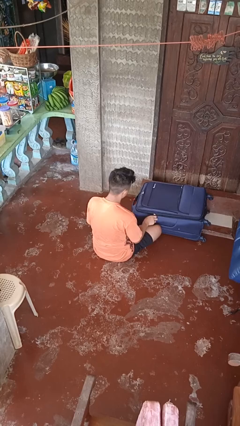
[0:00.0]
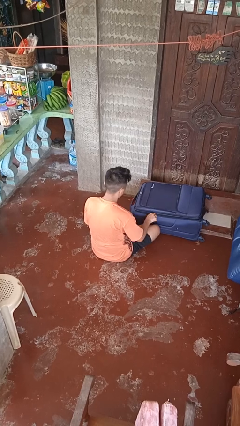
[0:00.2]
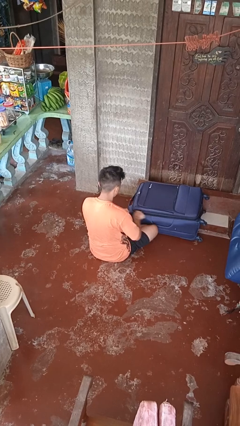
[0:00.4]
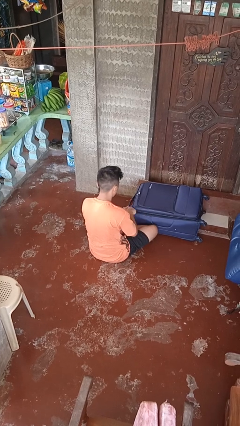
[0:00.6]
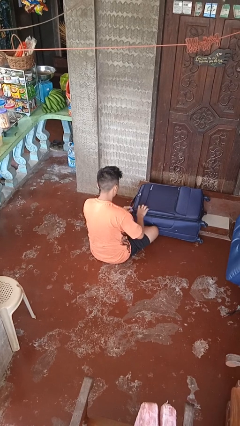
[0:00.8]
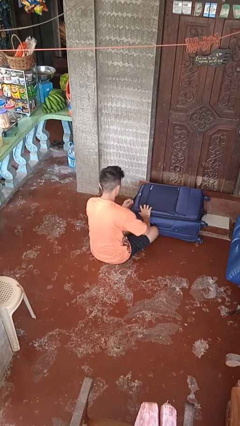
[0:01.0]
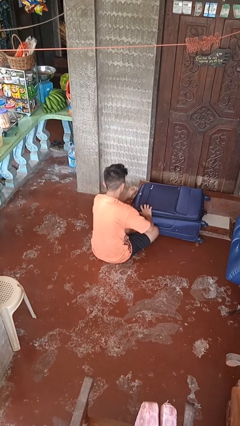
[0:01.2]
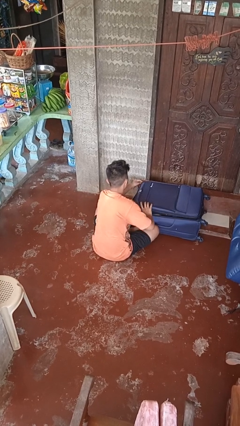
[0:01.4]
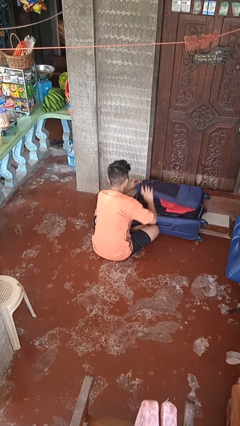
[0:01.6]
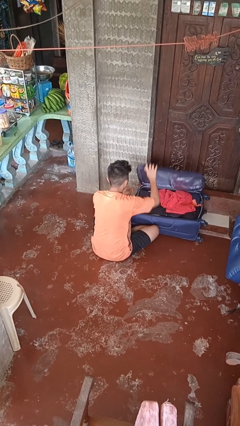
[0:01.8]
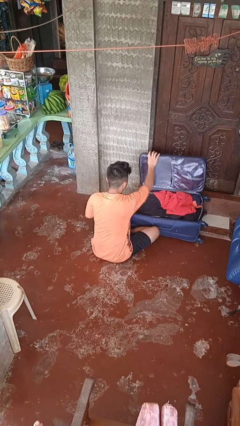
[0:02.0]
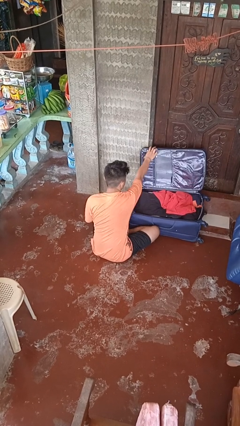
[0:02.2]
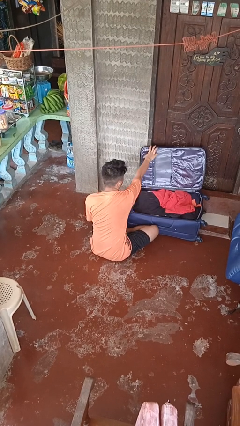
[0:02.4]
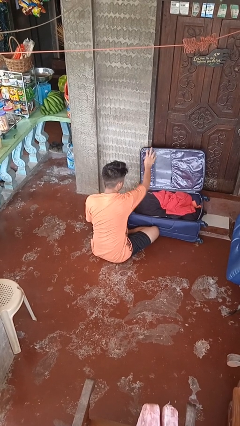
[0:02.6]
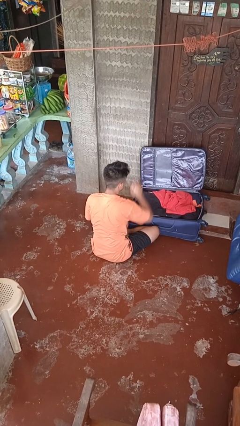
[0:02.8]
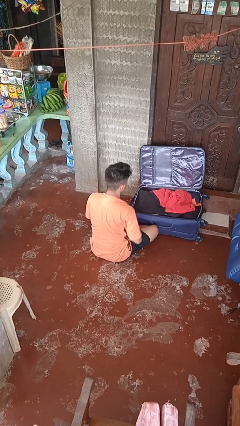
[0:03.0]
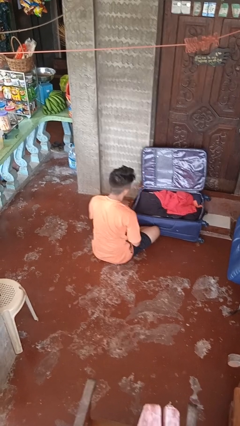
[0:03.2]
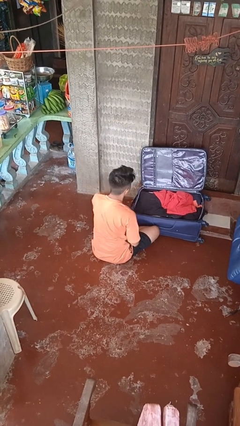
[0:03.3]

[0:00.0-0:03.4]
person opens suitcase

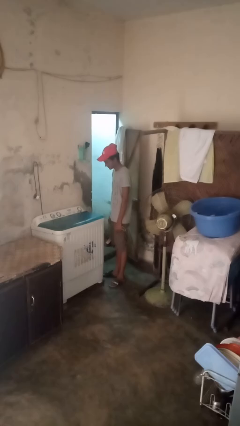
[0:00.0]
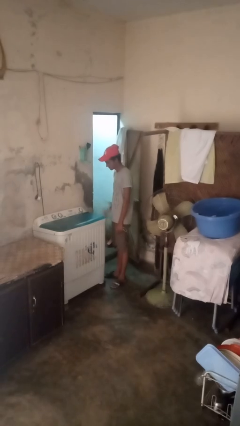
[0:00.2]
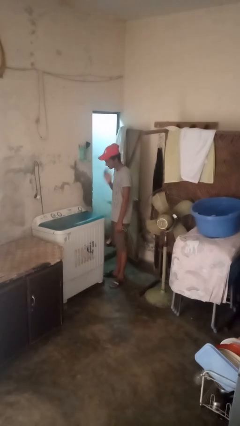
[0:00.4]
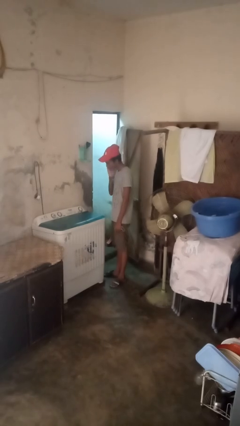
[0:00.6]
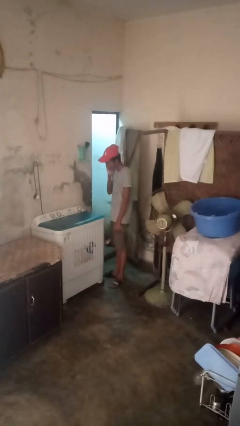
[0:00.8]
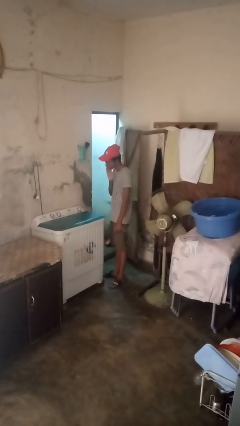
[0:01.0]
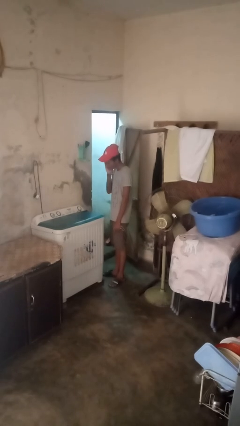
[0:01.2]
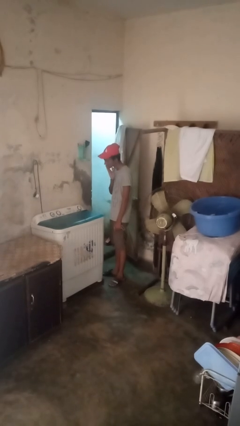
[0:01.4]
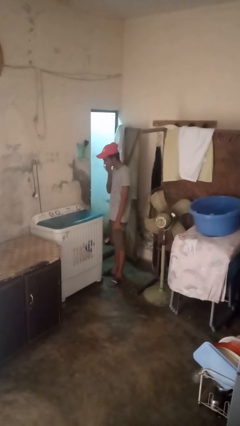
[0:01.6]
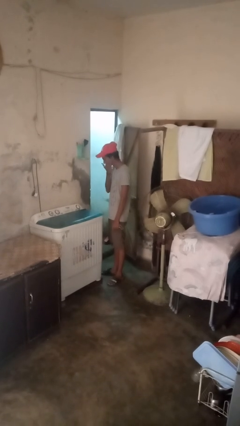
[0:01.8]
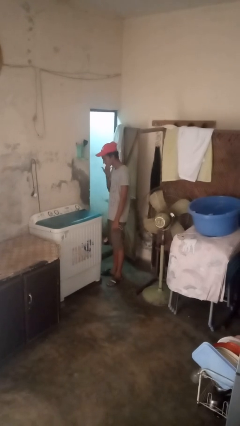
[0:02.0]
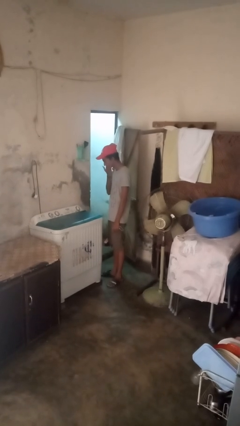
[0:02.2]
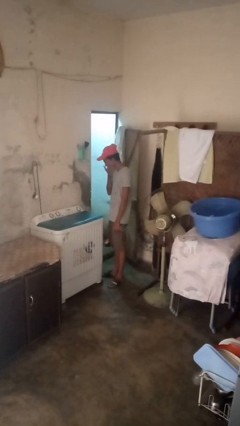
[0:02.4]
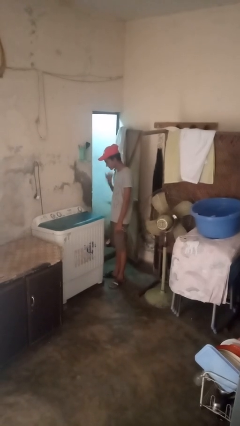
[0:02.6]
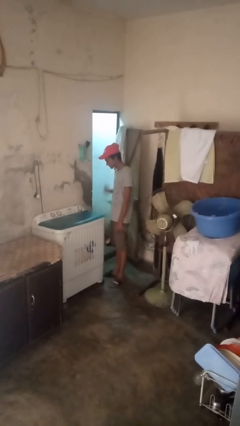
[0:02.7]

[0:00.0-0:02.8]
person applies shaving cream

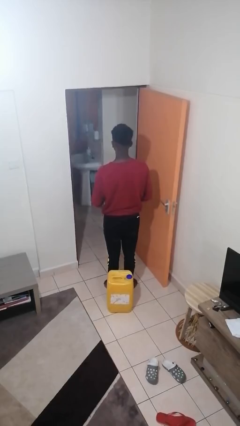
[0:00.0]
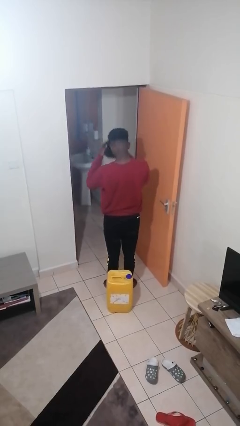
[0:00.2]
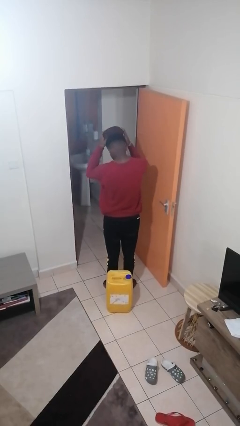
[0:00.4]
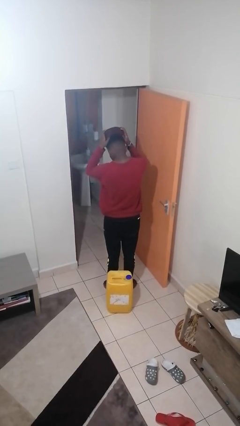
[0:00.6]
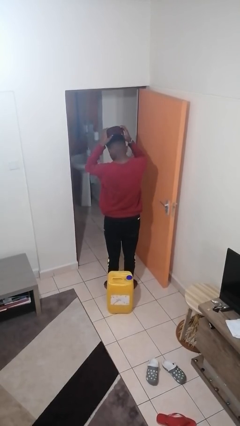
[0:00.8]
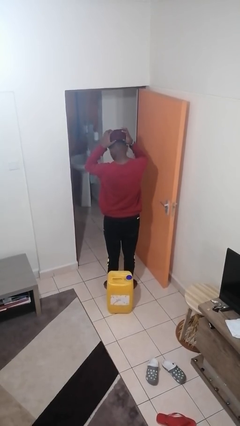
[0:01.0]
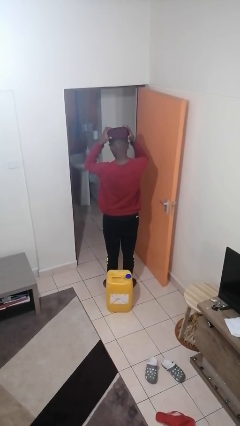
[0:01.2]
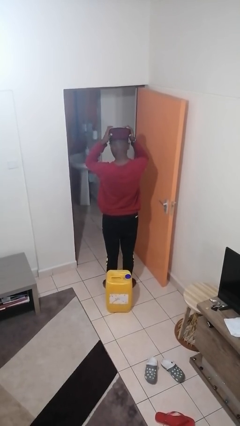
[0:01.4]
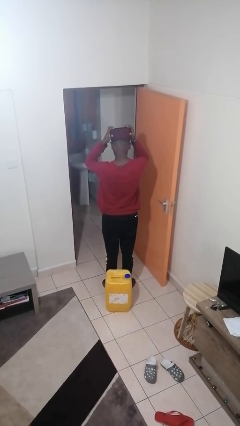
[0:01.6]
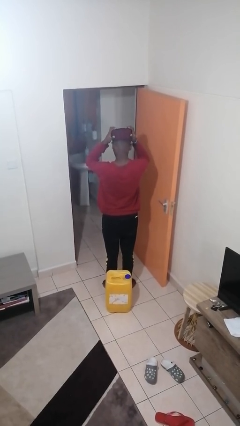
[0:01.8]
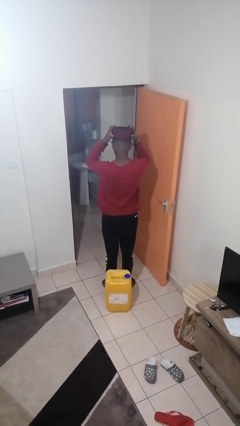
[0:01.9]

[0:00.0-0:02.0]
person puts on hat

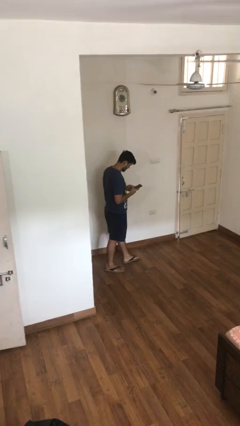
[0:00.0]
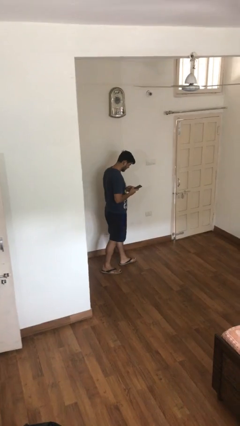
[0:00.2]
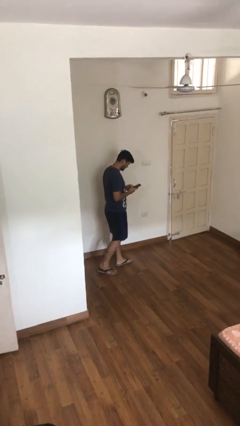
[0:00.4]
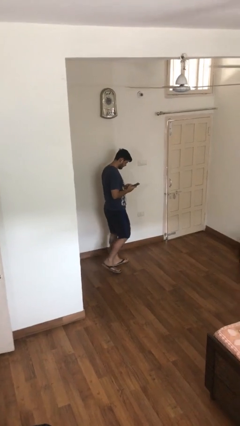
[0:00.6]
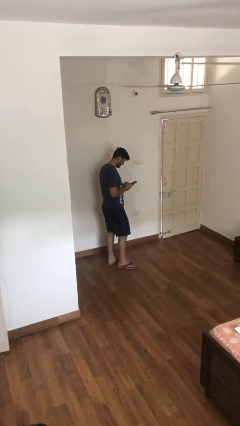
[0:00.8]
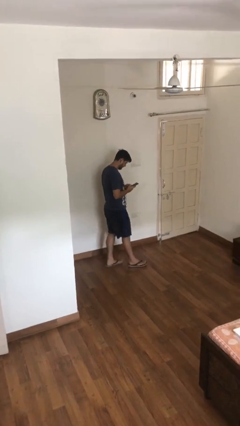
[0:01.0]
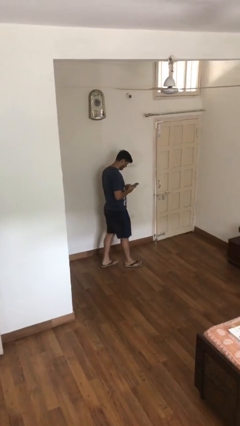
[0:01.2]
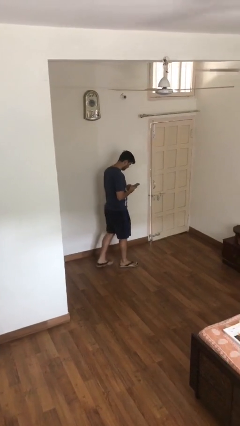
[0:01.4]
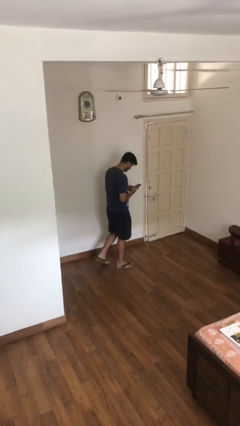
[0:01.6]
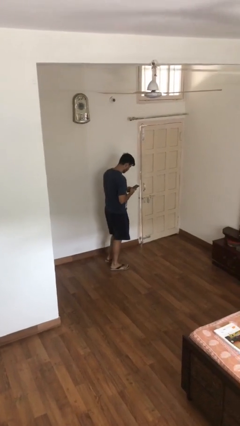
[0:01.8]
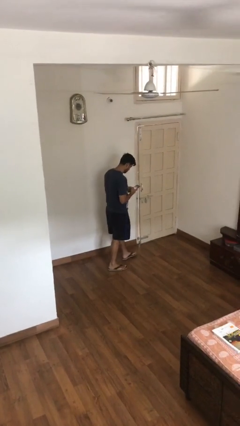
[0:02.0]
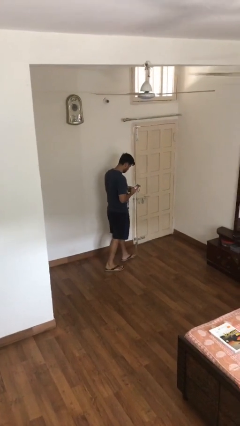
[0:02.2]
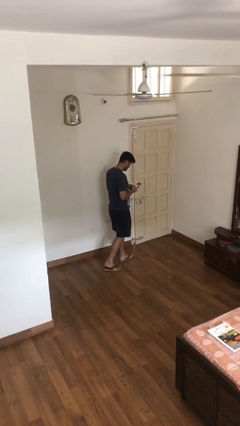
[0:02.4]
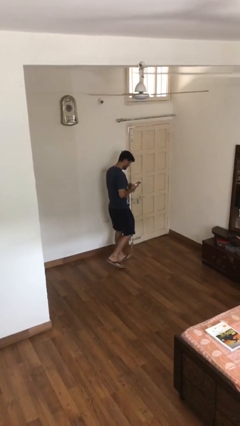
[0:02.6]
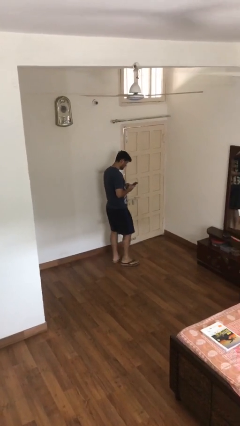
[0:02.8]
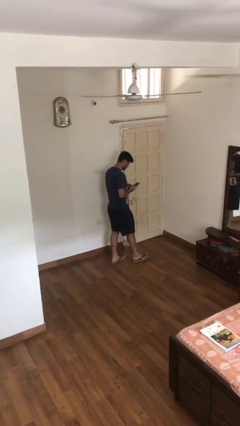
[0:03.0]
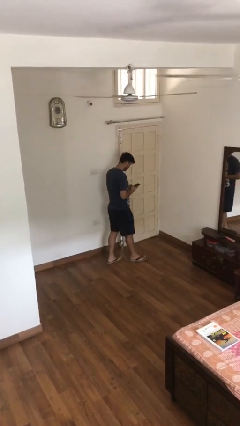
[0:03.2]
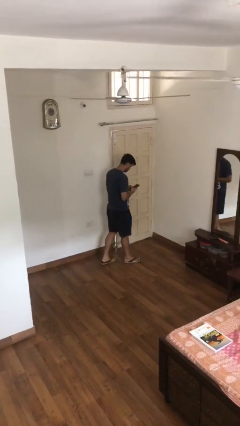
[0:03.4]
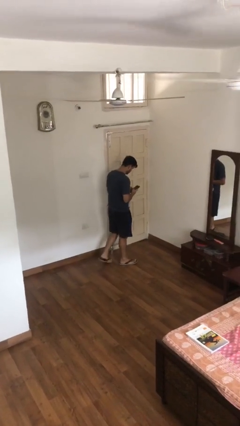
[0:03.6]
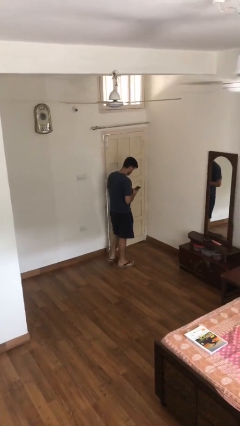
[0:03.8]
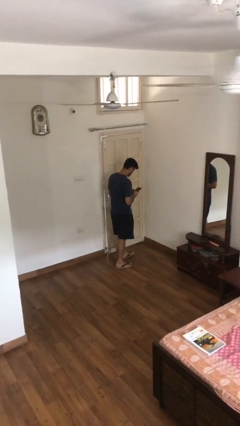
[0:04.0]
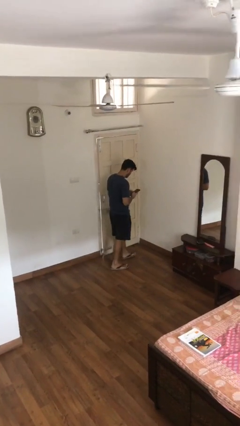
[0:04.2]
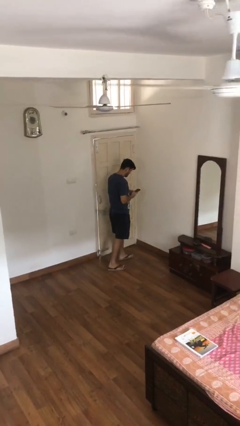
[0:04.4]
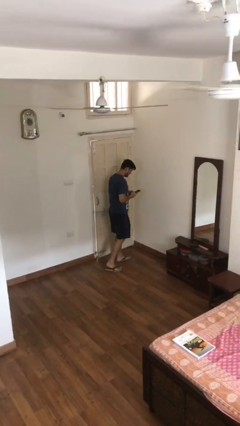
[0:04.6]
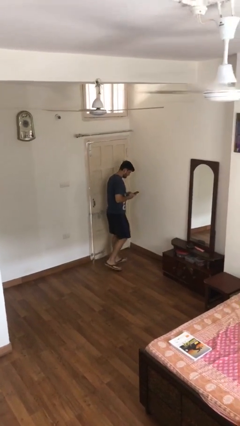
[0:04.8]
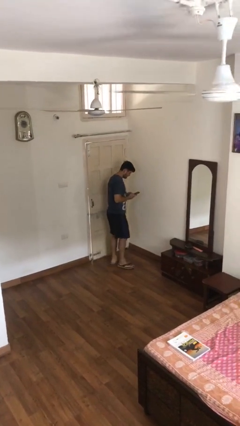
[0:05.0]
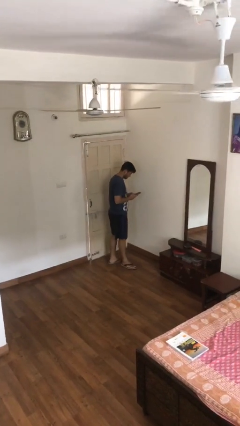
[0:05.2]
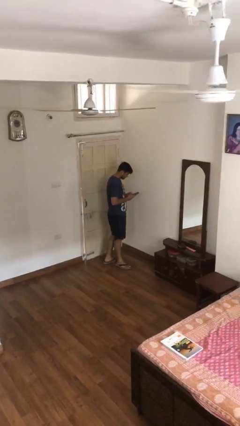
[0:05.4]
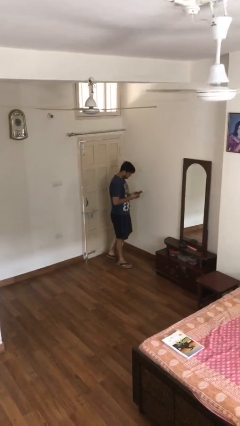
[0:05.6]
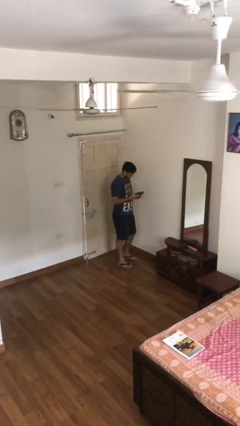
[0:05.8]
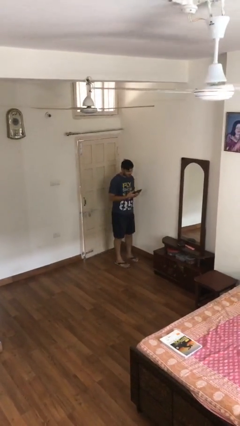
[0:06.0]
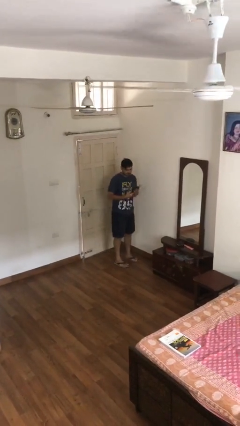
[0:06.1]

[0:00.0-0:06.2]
person texts on phone

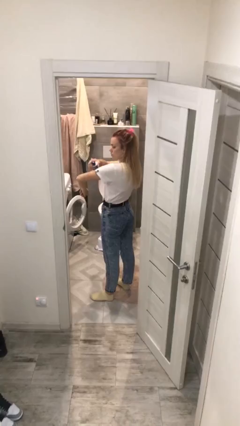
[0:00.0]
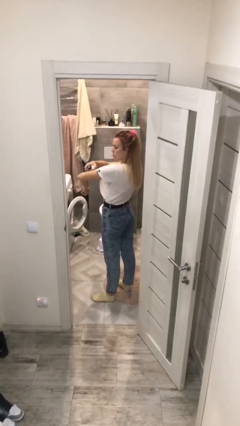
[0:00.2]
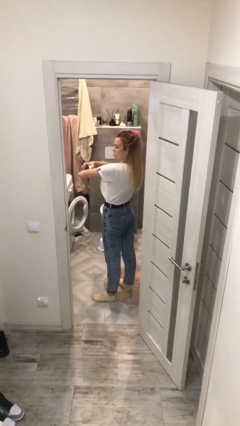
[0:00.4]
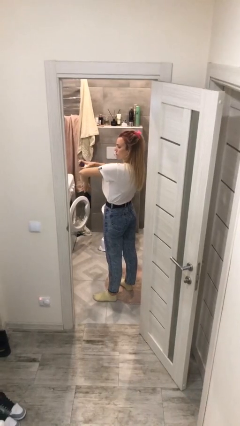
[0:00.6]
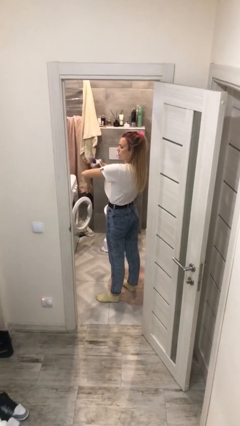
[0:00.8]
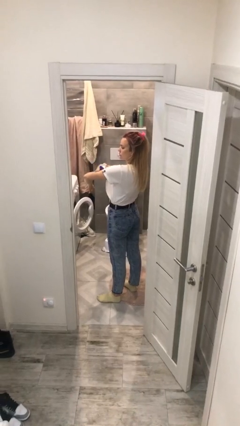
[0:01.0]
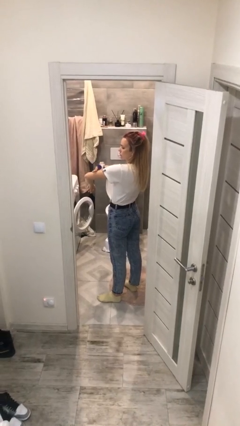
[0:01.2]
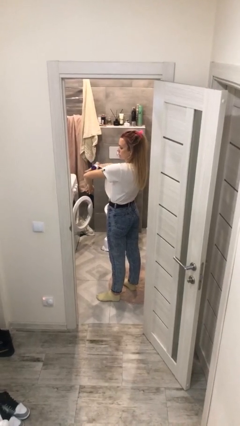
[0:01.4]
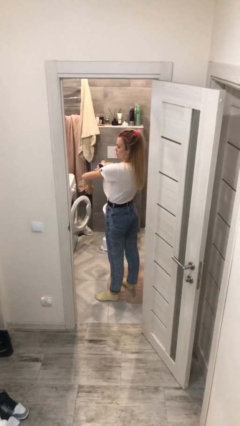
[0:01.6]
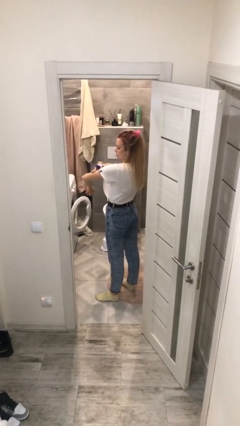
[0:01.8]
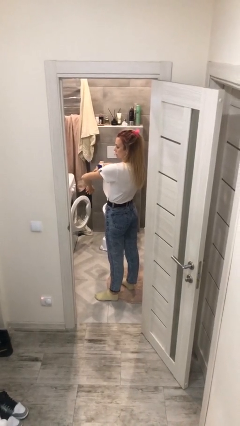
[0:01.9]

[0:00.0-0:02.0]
person applies sunscreen

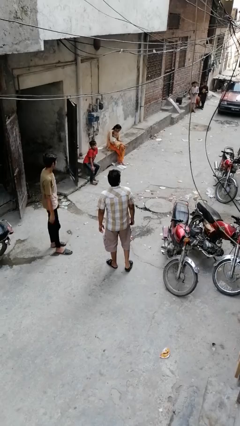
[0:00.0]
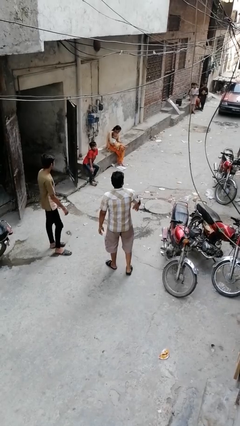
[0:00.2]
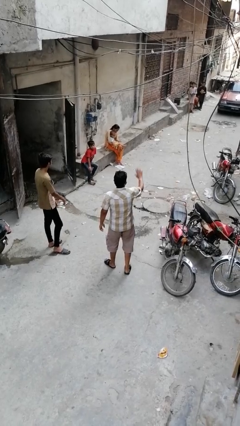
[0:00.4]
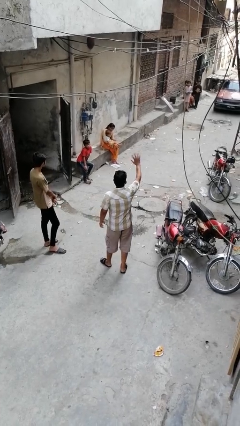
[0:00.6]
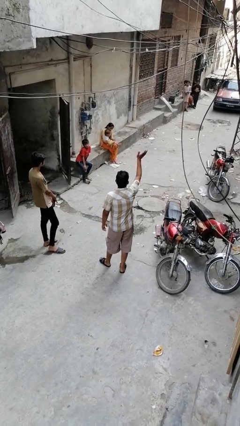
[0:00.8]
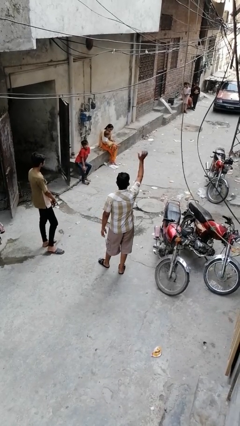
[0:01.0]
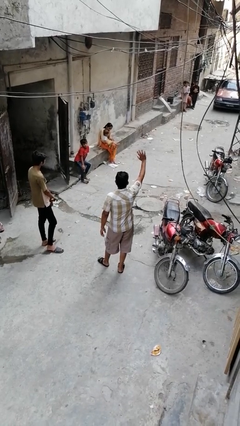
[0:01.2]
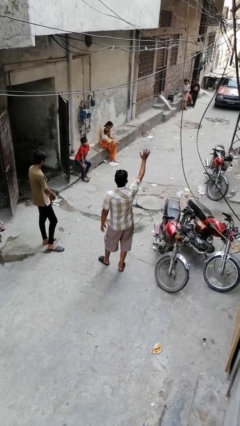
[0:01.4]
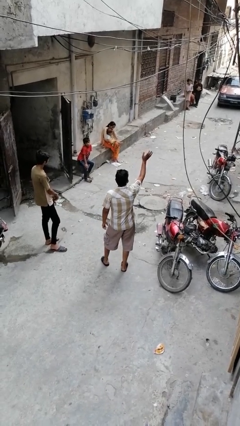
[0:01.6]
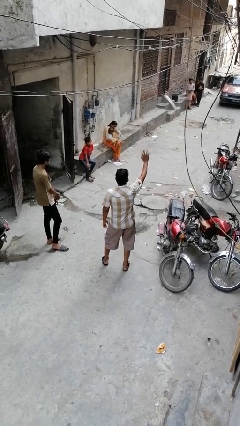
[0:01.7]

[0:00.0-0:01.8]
person waves at person
